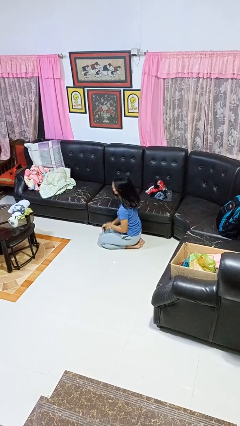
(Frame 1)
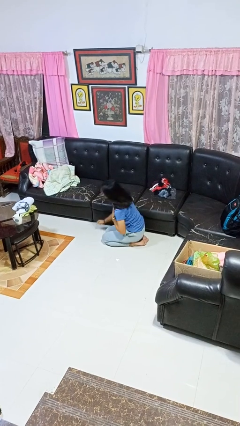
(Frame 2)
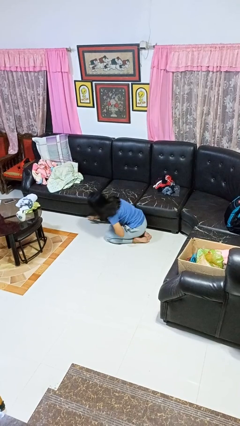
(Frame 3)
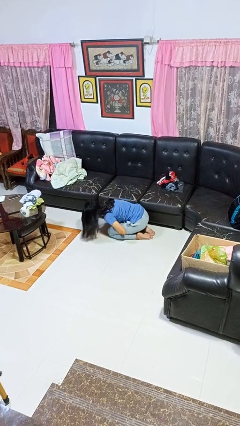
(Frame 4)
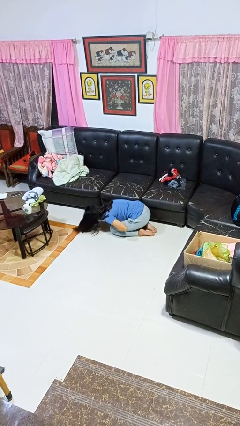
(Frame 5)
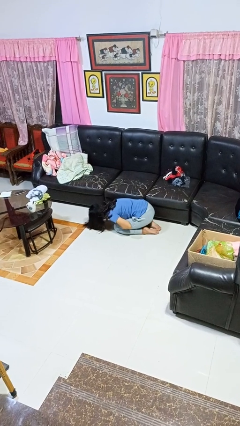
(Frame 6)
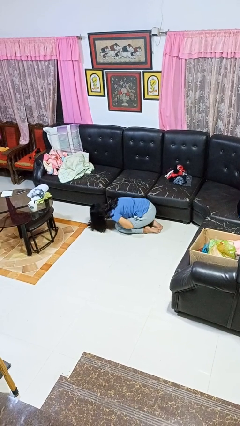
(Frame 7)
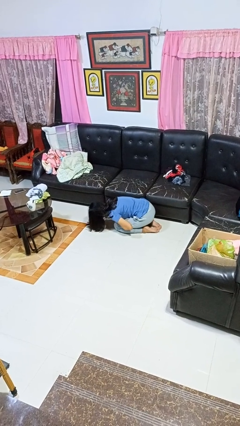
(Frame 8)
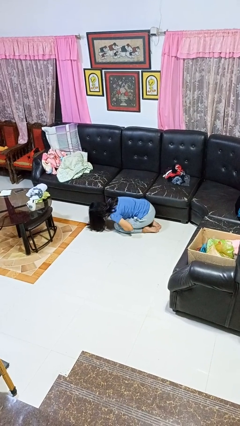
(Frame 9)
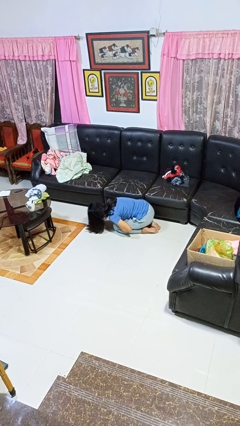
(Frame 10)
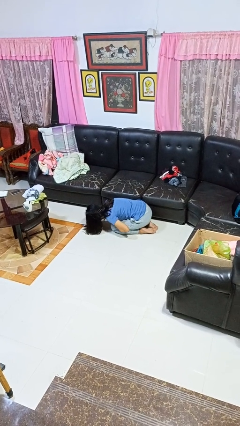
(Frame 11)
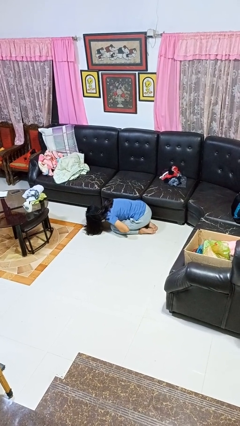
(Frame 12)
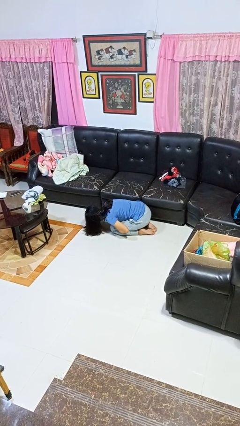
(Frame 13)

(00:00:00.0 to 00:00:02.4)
person searches under couch

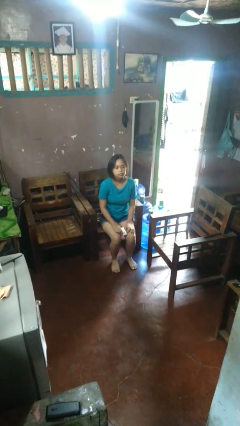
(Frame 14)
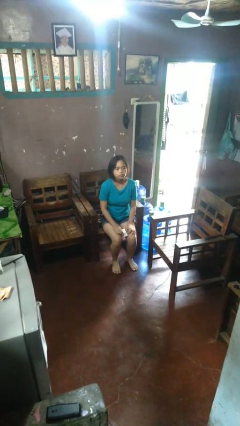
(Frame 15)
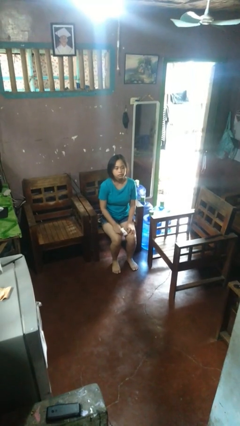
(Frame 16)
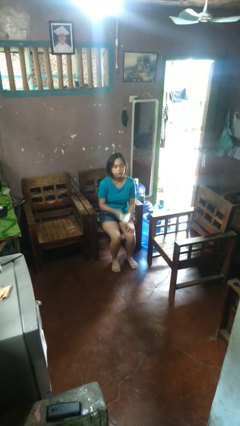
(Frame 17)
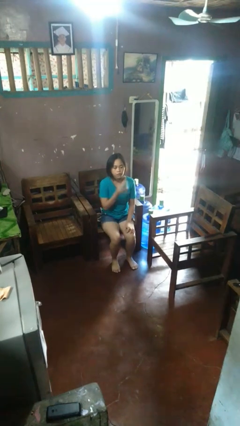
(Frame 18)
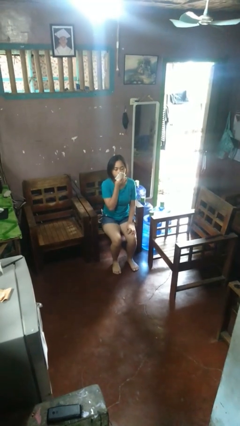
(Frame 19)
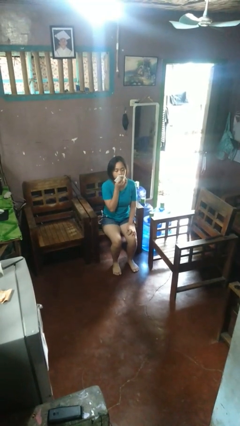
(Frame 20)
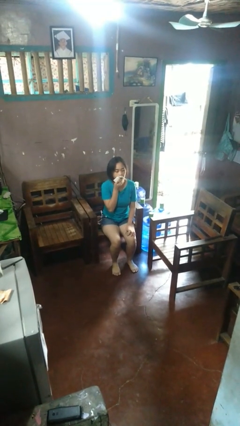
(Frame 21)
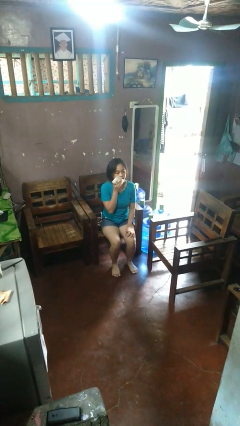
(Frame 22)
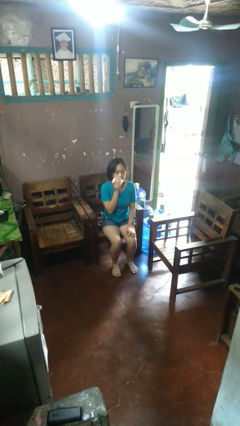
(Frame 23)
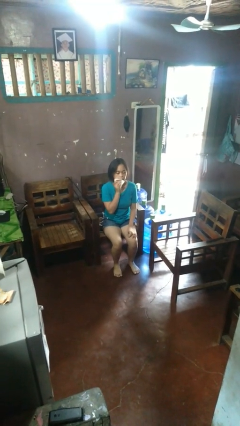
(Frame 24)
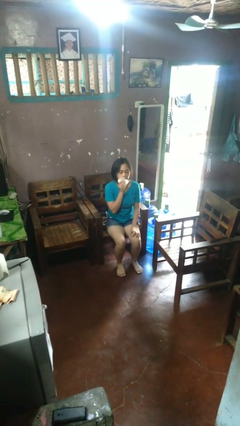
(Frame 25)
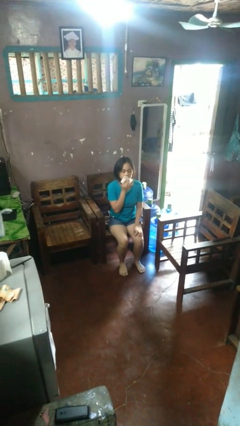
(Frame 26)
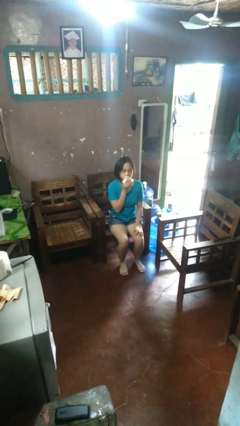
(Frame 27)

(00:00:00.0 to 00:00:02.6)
person wipes mouth with napkin

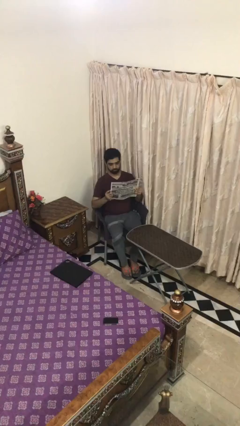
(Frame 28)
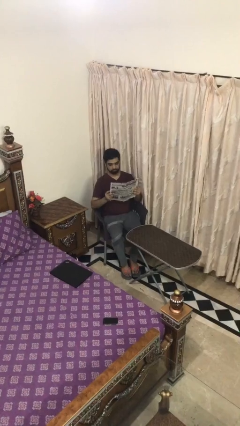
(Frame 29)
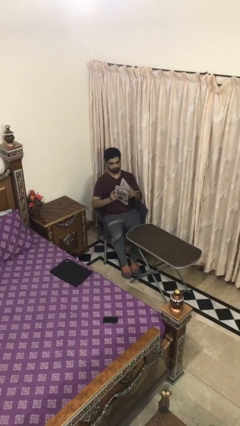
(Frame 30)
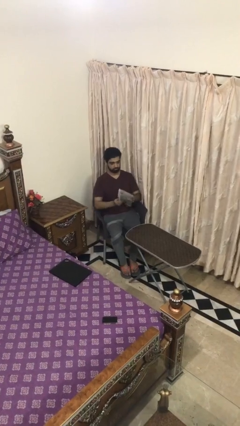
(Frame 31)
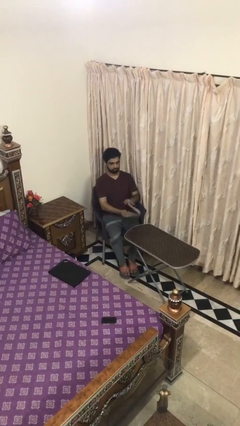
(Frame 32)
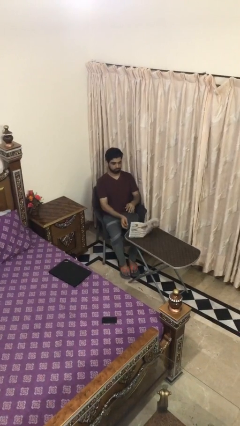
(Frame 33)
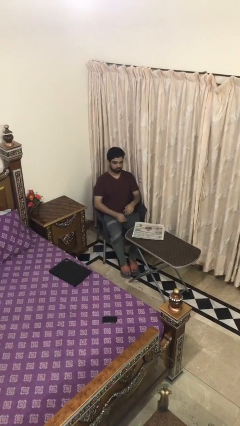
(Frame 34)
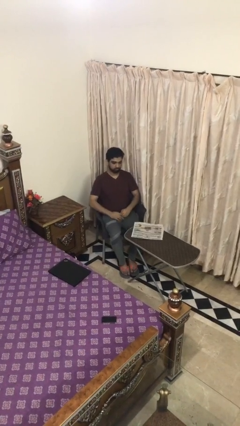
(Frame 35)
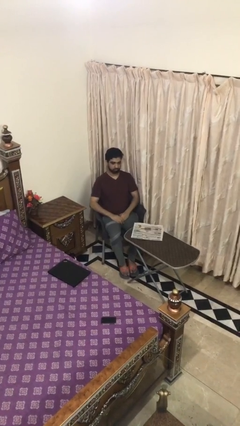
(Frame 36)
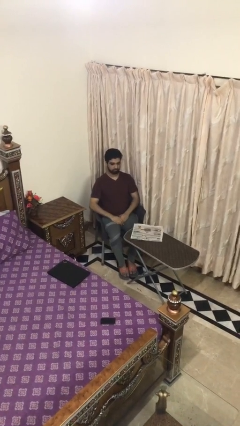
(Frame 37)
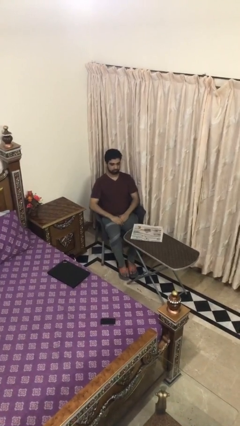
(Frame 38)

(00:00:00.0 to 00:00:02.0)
person puts down object on table

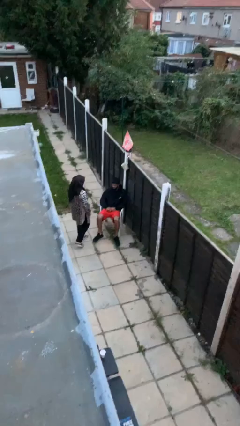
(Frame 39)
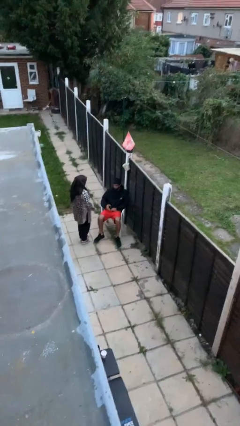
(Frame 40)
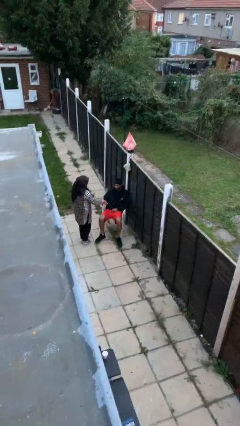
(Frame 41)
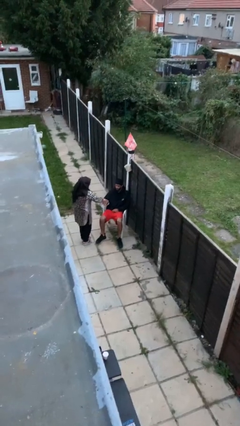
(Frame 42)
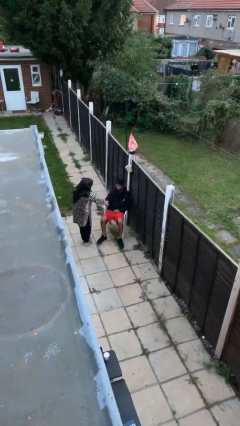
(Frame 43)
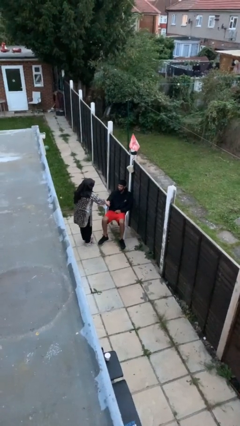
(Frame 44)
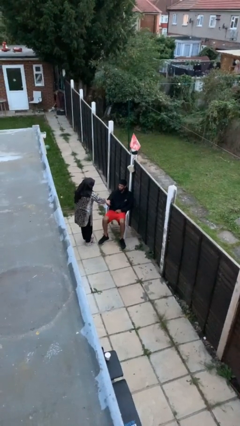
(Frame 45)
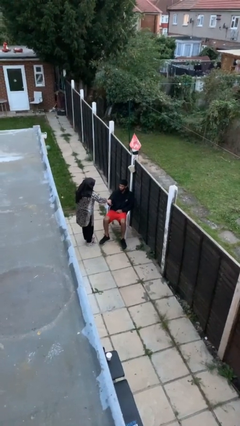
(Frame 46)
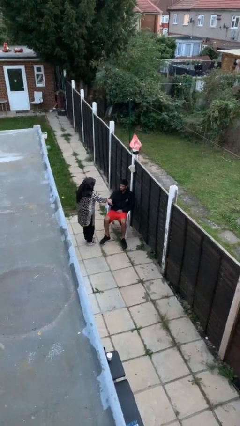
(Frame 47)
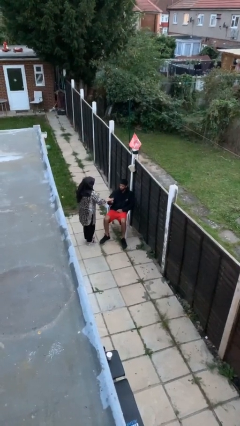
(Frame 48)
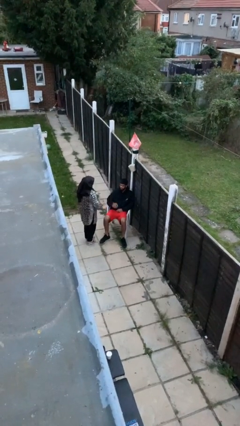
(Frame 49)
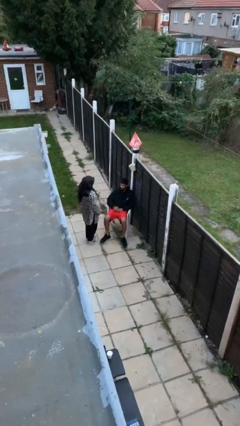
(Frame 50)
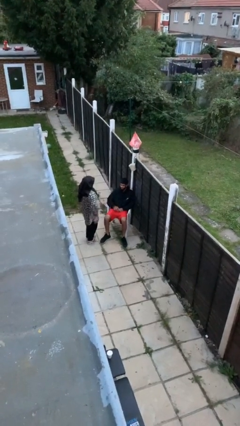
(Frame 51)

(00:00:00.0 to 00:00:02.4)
person shakes hand

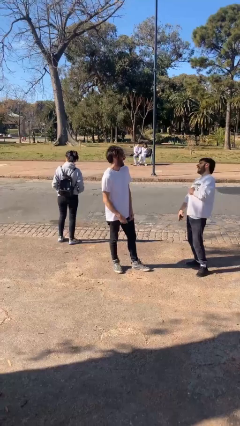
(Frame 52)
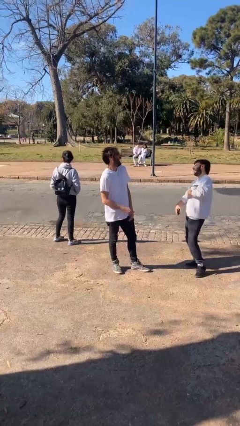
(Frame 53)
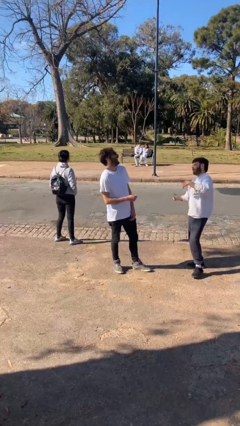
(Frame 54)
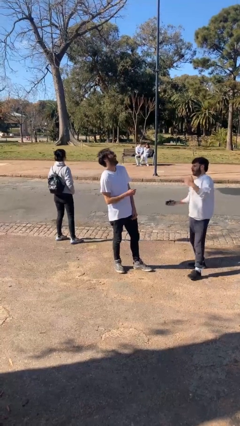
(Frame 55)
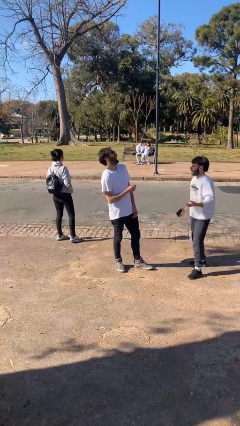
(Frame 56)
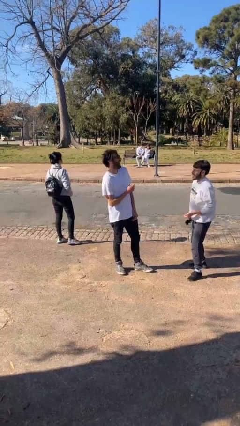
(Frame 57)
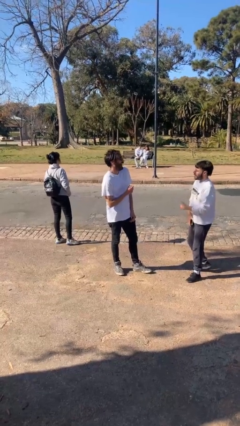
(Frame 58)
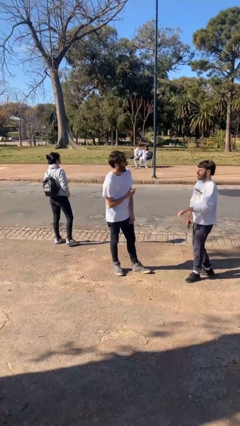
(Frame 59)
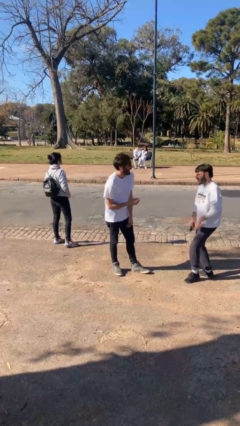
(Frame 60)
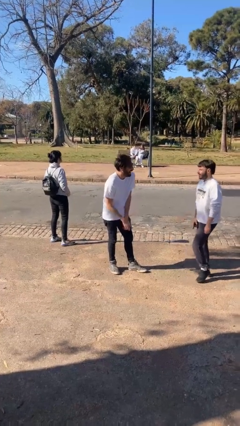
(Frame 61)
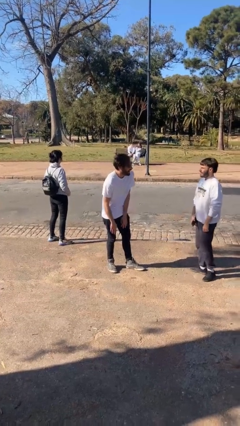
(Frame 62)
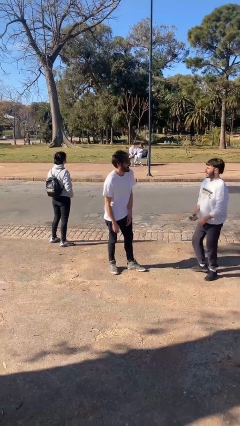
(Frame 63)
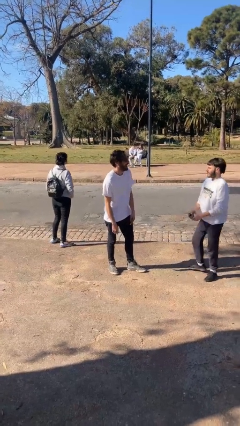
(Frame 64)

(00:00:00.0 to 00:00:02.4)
person laughs with person

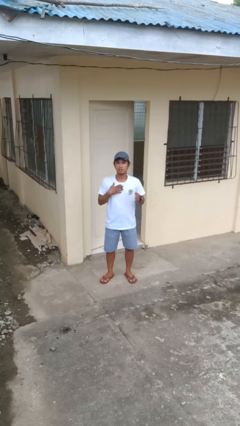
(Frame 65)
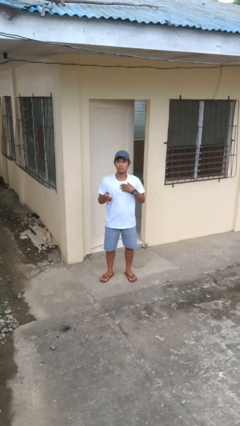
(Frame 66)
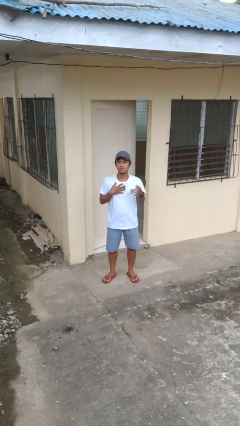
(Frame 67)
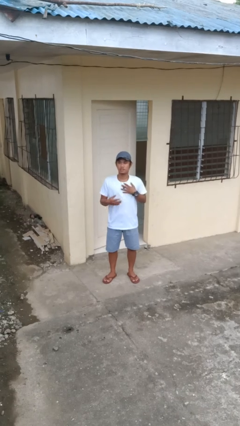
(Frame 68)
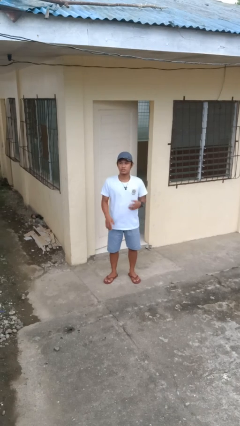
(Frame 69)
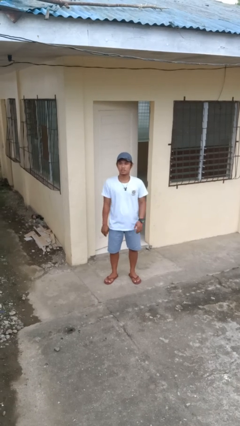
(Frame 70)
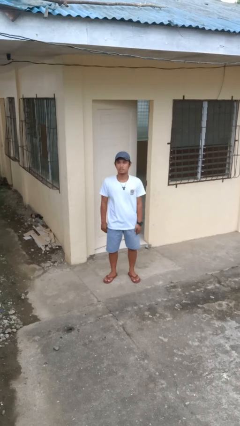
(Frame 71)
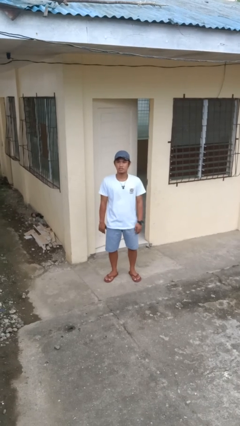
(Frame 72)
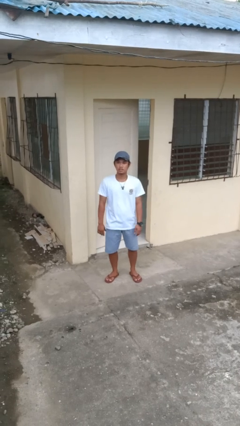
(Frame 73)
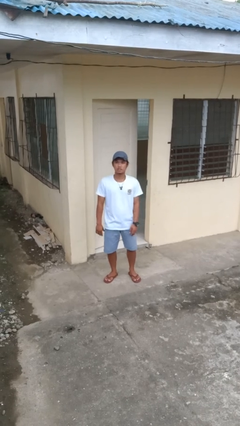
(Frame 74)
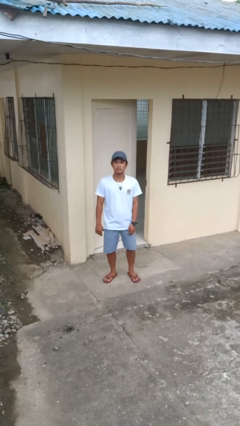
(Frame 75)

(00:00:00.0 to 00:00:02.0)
person drums on chest

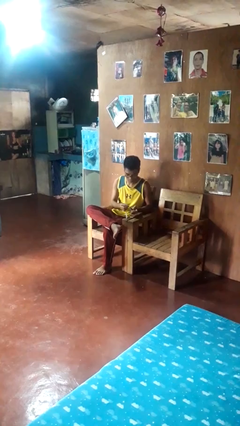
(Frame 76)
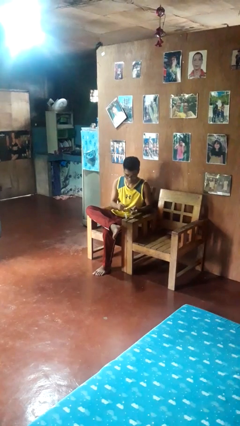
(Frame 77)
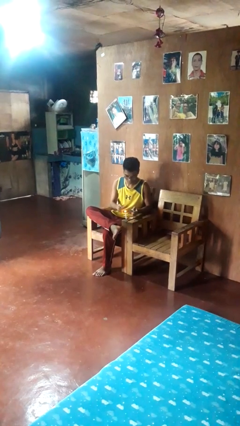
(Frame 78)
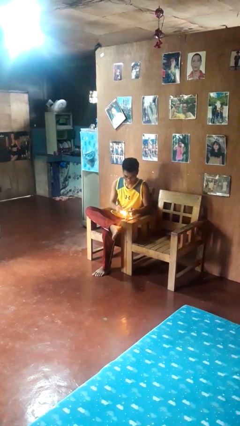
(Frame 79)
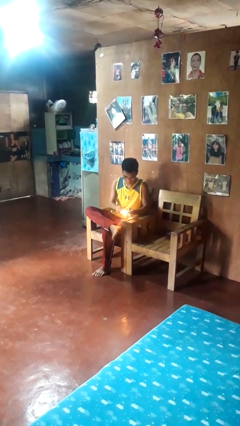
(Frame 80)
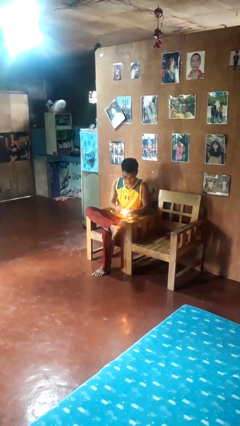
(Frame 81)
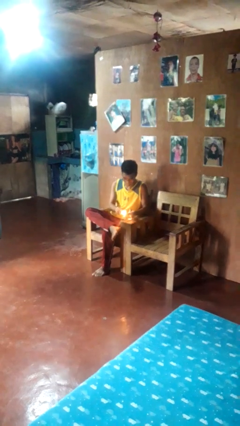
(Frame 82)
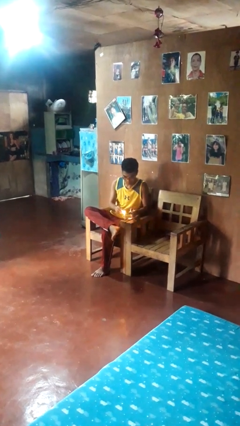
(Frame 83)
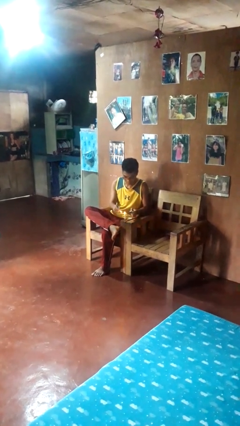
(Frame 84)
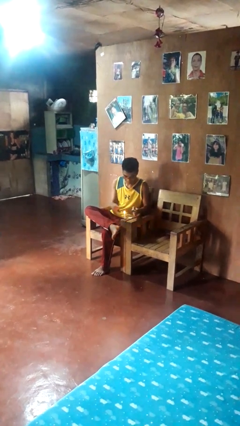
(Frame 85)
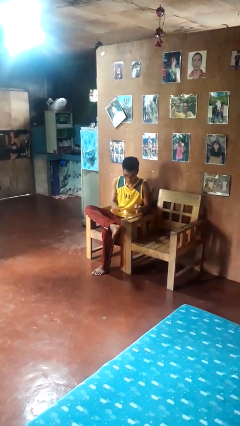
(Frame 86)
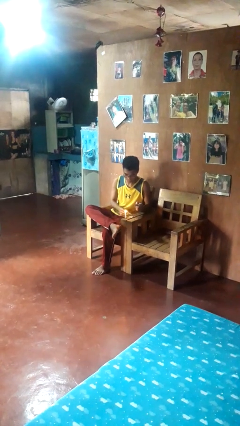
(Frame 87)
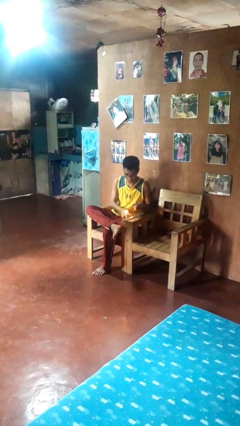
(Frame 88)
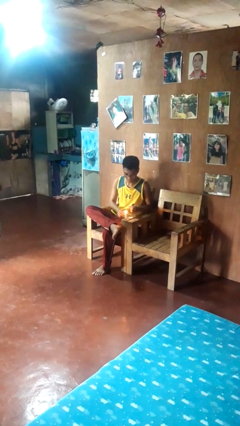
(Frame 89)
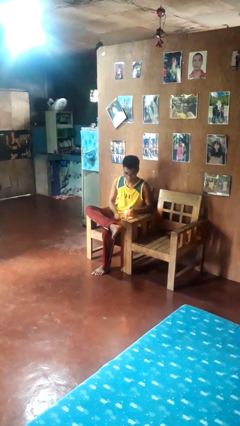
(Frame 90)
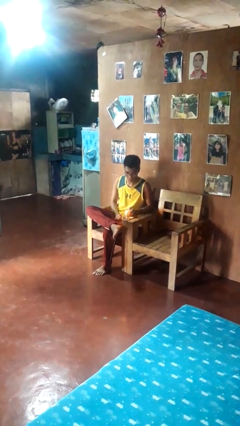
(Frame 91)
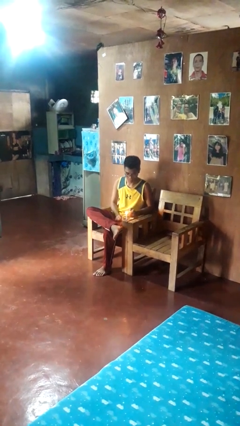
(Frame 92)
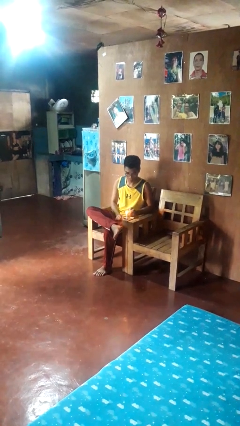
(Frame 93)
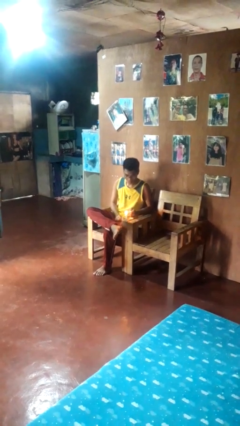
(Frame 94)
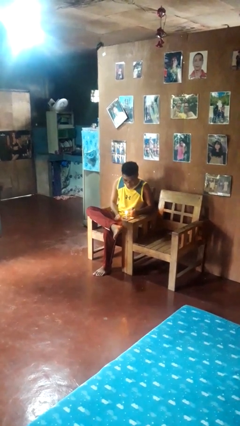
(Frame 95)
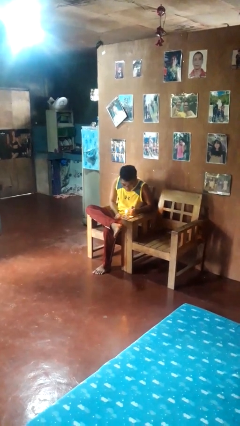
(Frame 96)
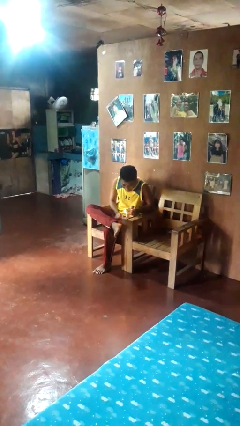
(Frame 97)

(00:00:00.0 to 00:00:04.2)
person lights candle
